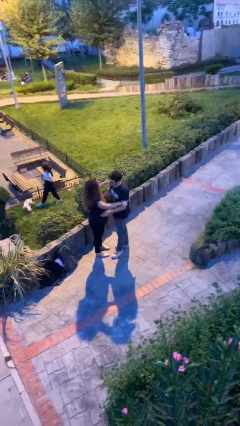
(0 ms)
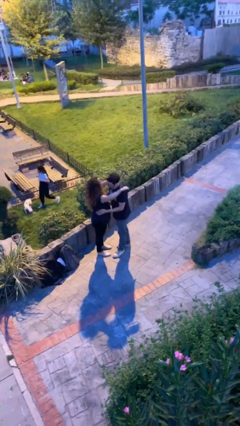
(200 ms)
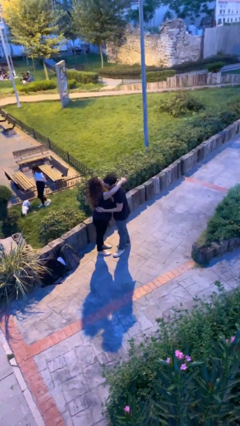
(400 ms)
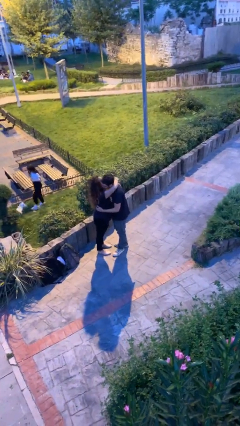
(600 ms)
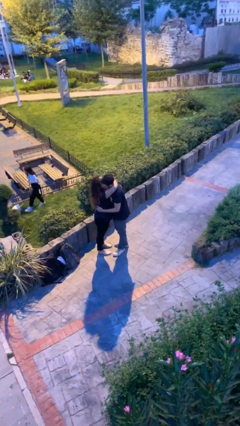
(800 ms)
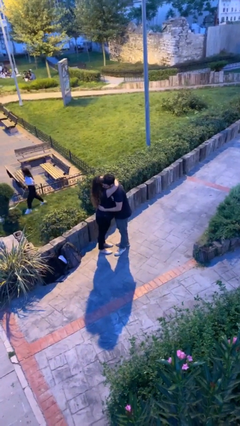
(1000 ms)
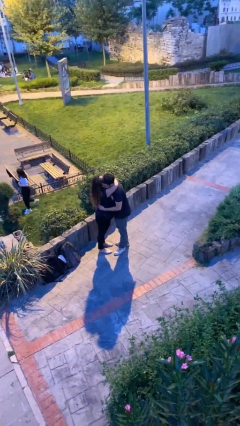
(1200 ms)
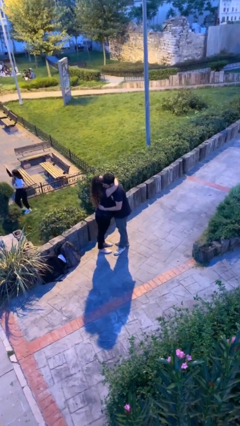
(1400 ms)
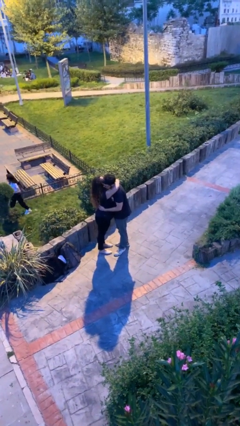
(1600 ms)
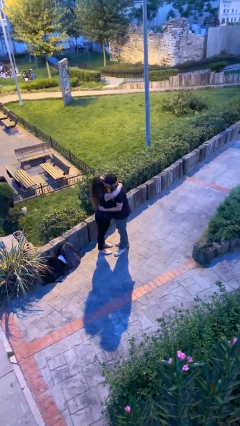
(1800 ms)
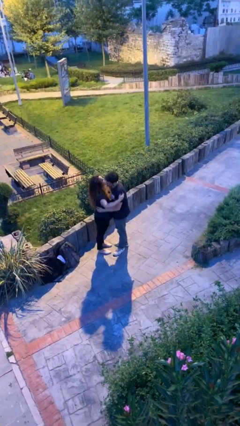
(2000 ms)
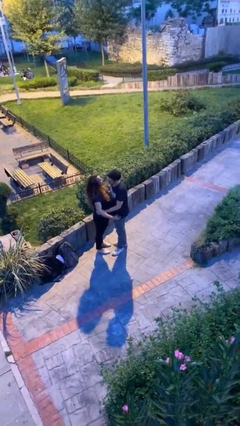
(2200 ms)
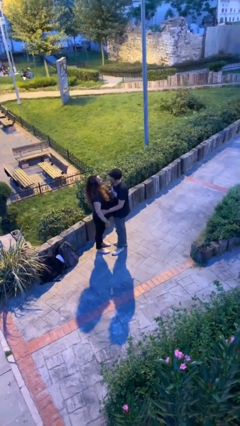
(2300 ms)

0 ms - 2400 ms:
person embraces person

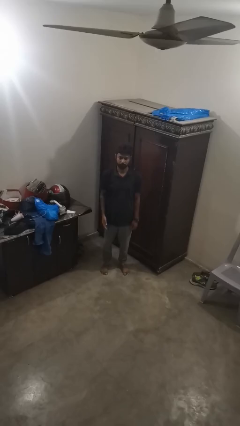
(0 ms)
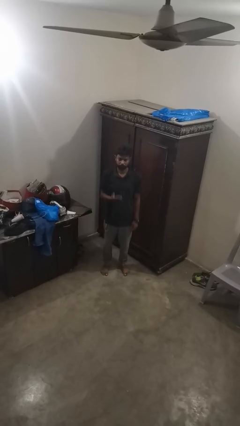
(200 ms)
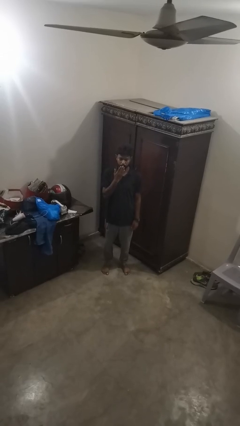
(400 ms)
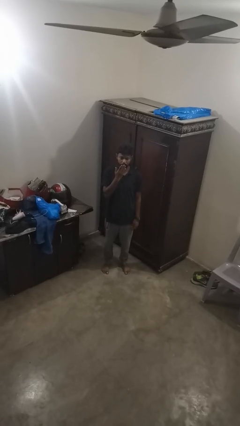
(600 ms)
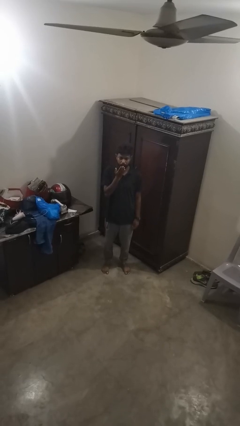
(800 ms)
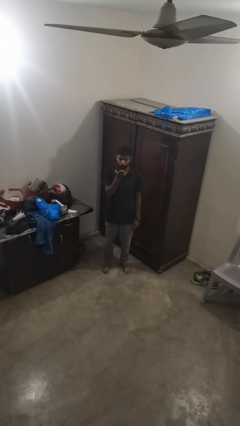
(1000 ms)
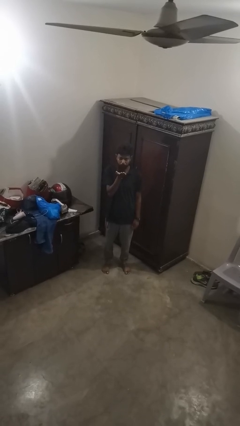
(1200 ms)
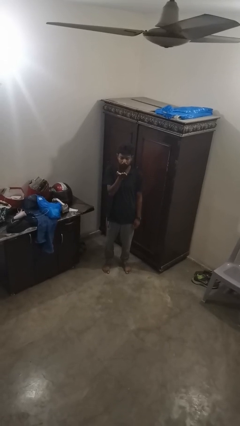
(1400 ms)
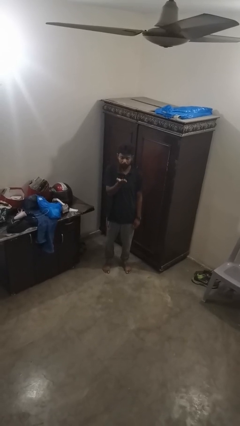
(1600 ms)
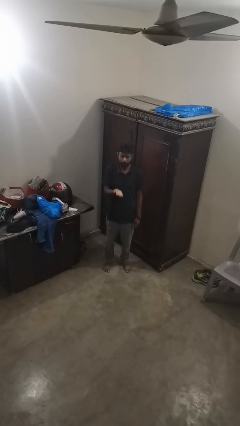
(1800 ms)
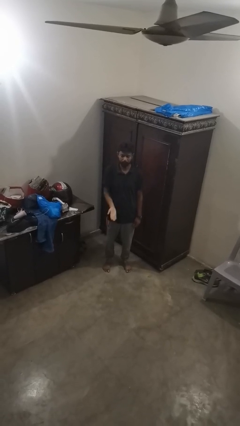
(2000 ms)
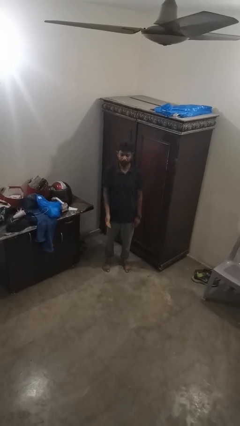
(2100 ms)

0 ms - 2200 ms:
person gestures blow kiss

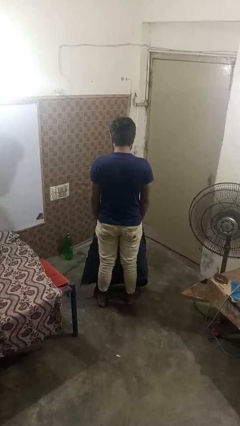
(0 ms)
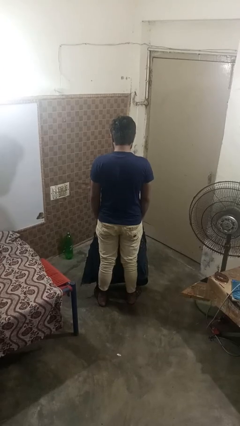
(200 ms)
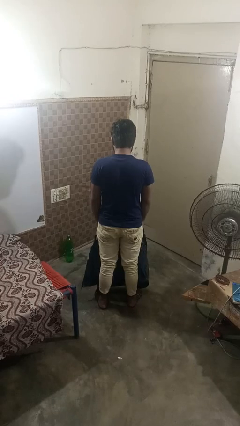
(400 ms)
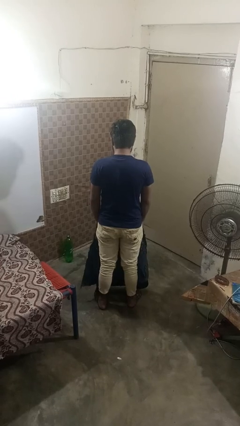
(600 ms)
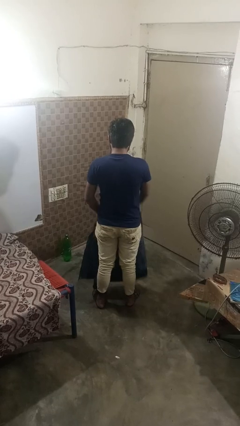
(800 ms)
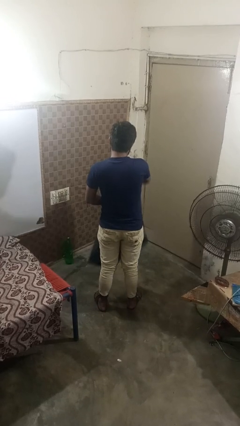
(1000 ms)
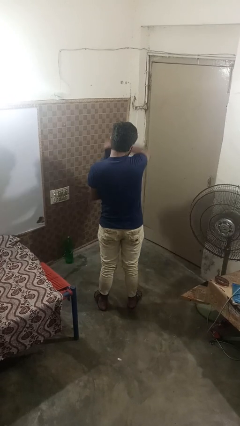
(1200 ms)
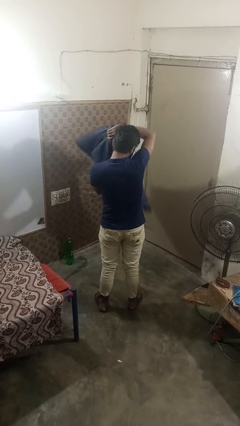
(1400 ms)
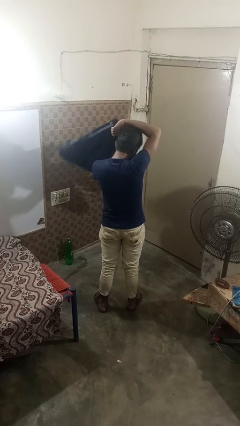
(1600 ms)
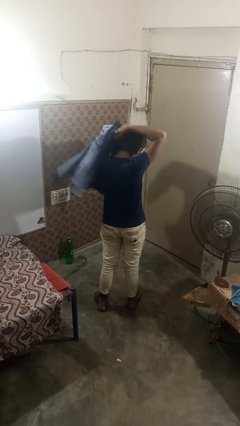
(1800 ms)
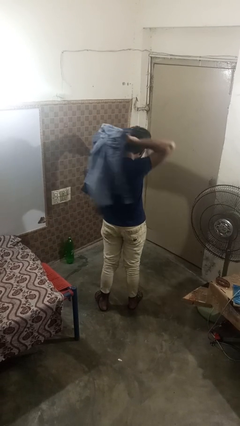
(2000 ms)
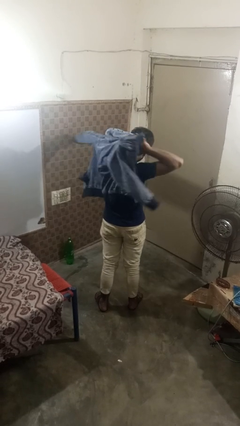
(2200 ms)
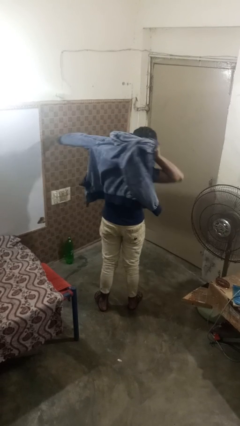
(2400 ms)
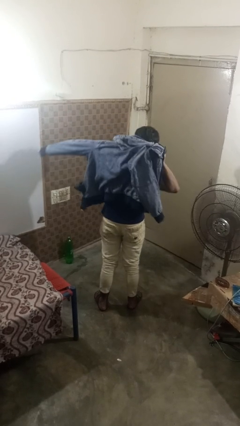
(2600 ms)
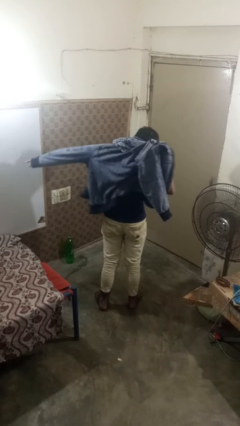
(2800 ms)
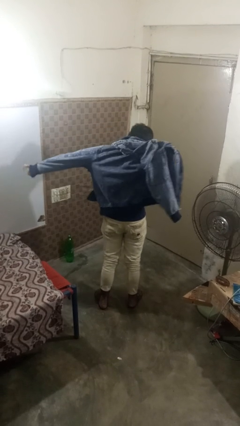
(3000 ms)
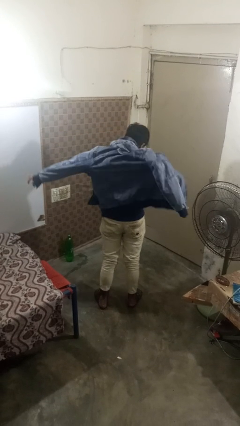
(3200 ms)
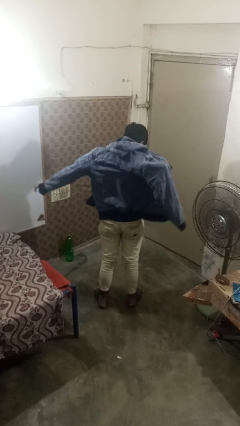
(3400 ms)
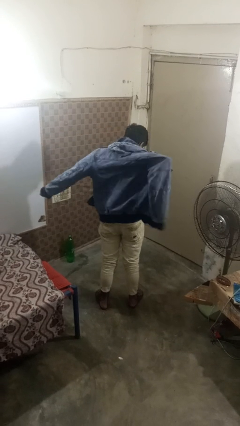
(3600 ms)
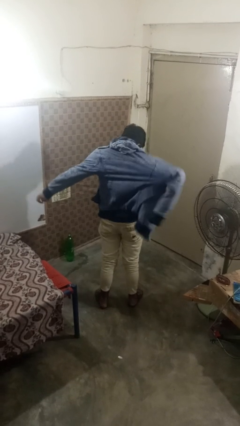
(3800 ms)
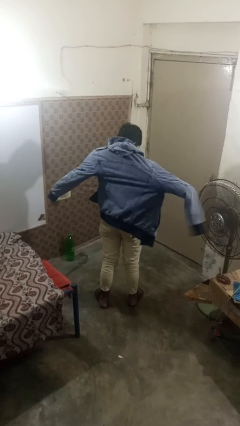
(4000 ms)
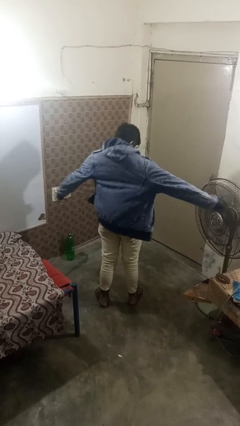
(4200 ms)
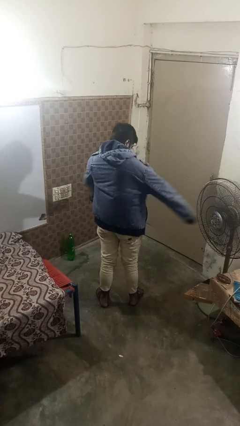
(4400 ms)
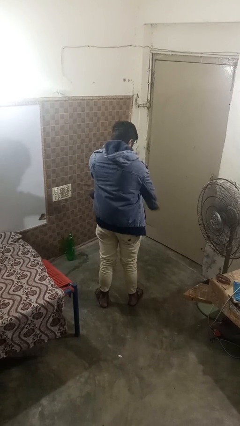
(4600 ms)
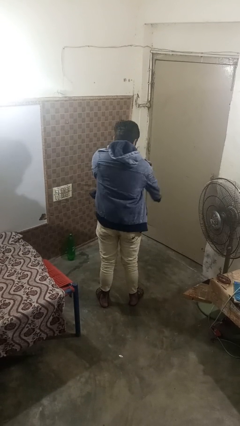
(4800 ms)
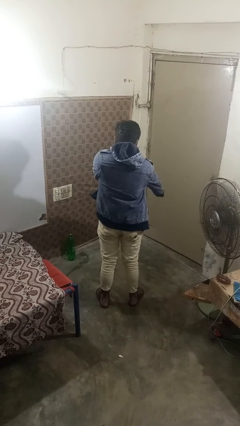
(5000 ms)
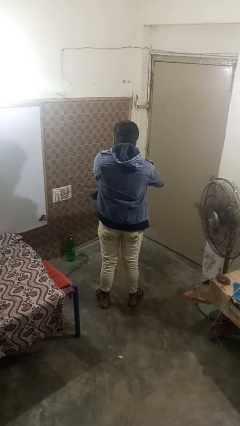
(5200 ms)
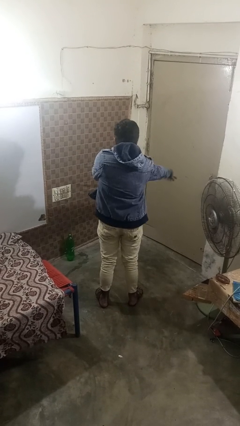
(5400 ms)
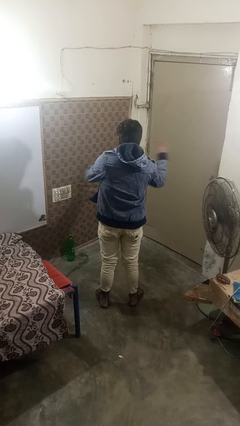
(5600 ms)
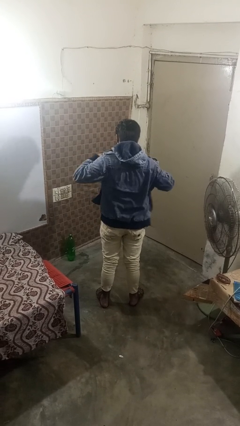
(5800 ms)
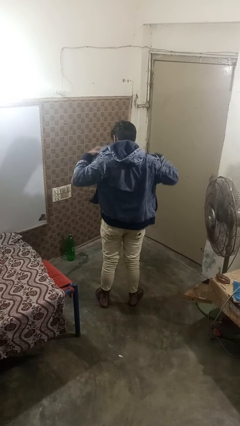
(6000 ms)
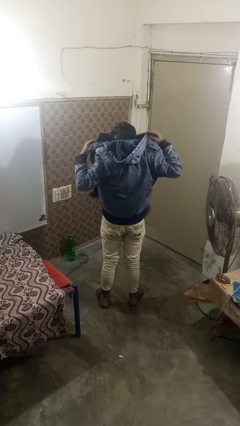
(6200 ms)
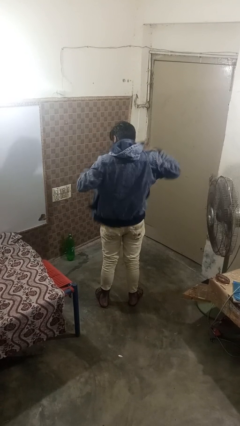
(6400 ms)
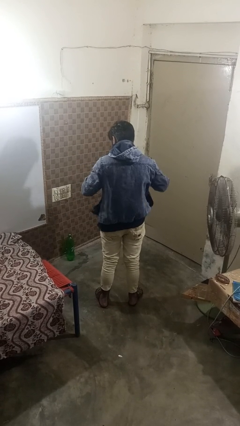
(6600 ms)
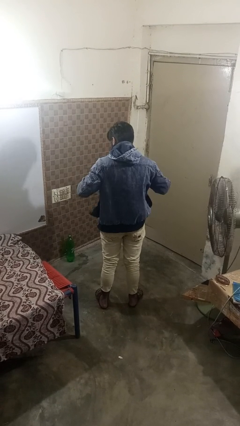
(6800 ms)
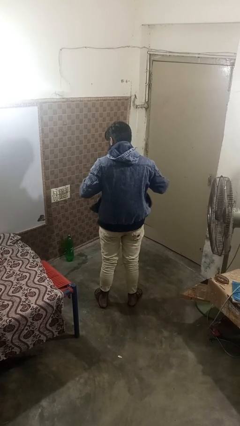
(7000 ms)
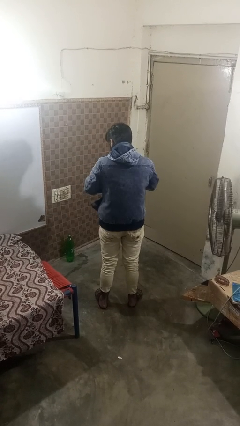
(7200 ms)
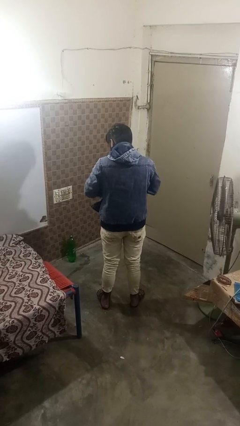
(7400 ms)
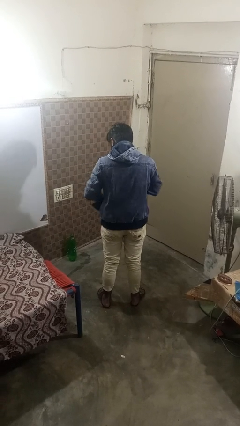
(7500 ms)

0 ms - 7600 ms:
person puts on jacket

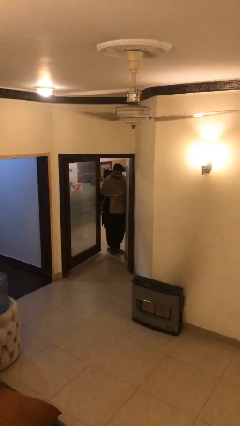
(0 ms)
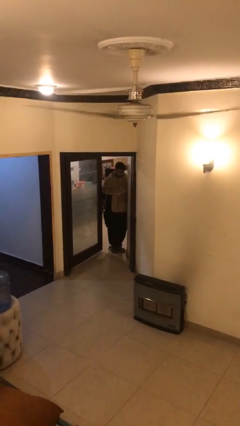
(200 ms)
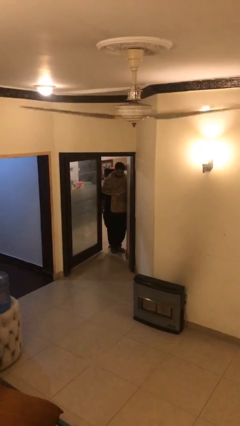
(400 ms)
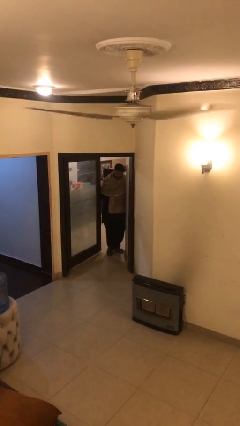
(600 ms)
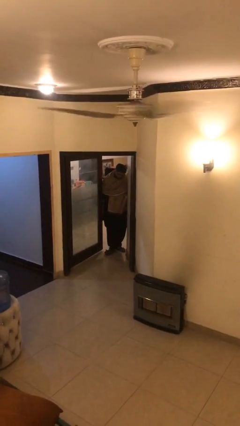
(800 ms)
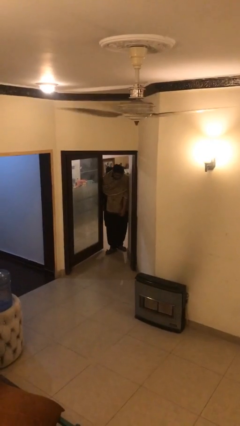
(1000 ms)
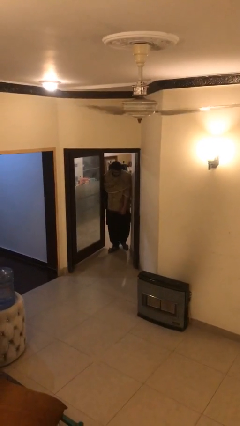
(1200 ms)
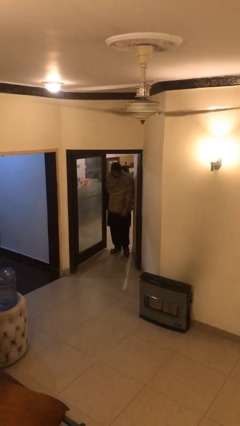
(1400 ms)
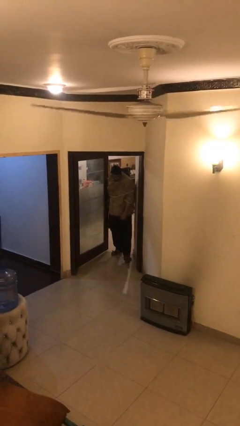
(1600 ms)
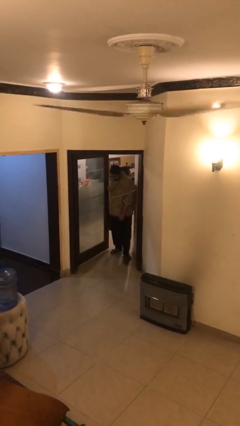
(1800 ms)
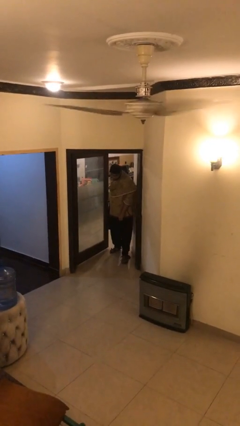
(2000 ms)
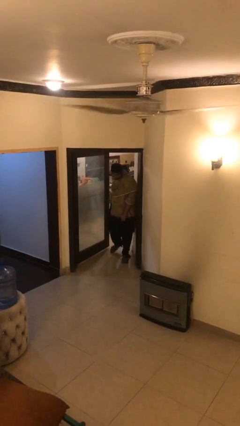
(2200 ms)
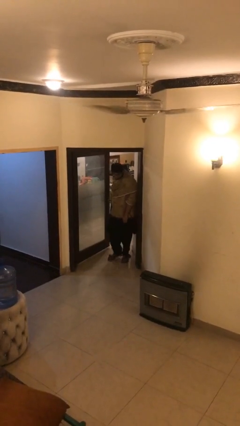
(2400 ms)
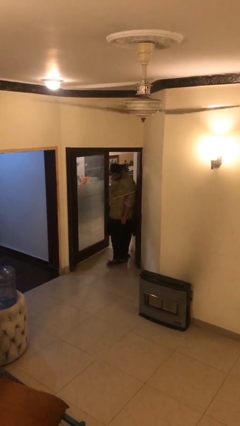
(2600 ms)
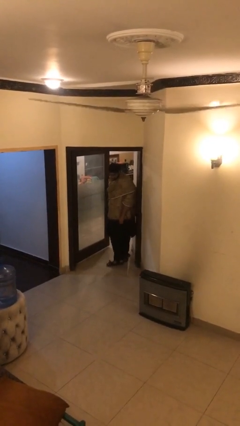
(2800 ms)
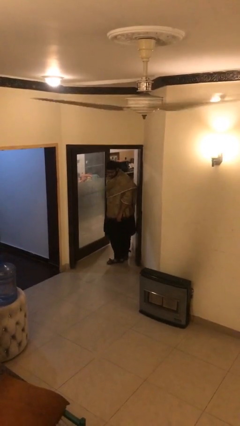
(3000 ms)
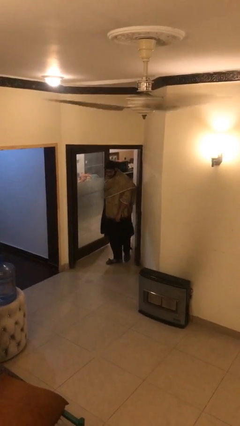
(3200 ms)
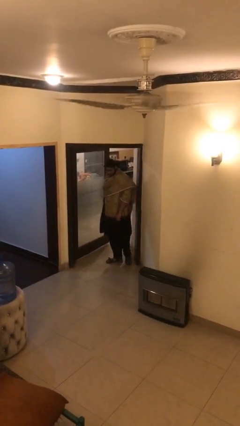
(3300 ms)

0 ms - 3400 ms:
person enters scene through structure

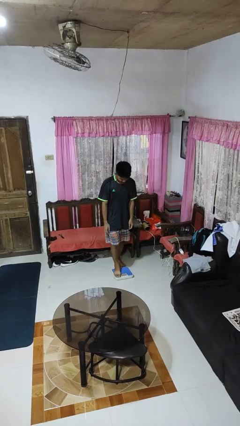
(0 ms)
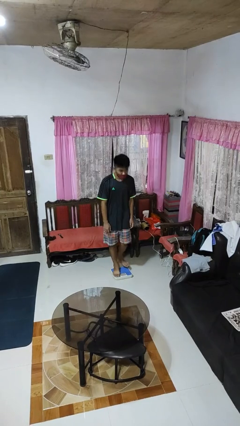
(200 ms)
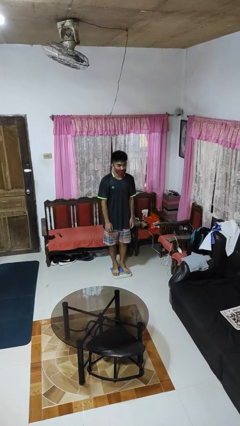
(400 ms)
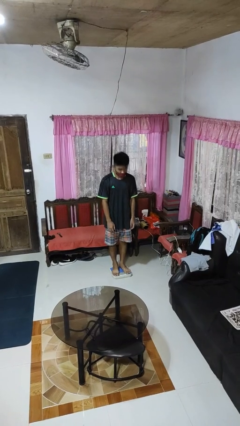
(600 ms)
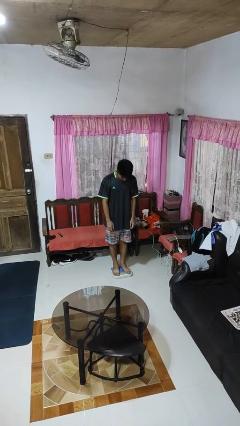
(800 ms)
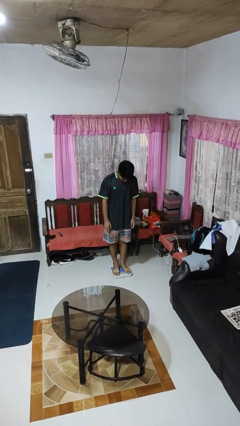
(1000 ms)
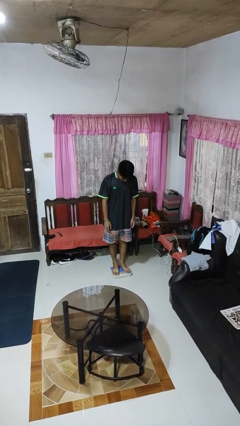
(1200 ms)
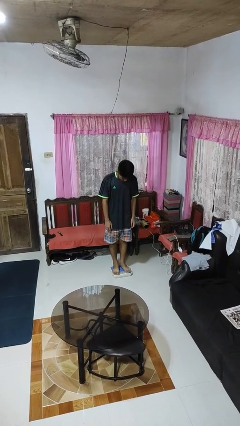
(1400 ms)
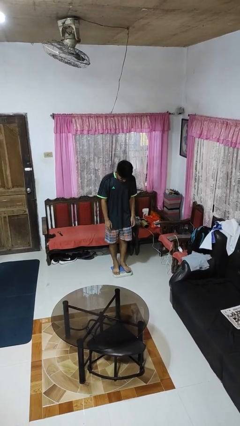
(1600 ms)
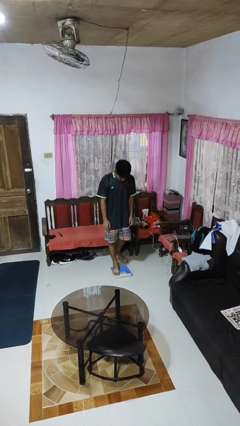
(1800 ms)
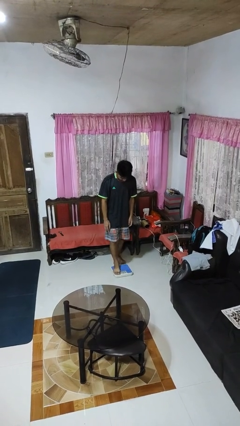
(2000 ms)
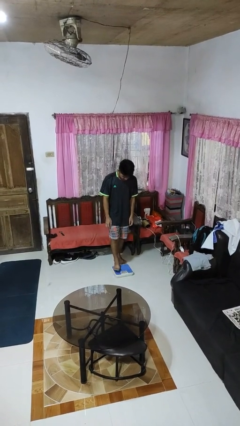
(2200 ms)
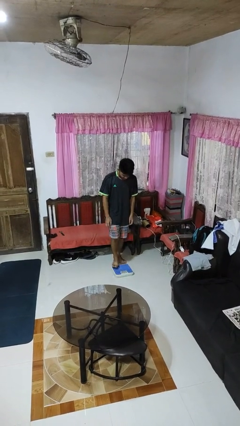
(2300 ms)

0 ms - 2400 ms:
person uses bodyweight scale
